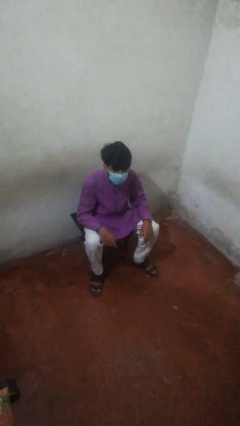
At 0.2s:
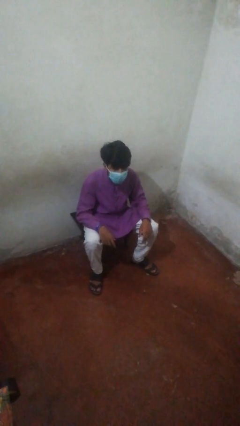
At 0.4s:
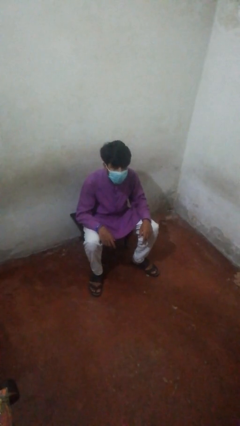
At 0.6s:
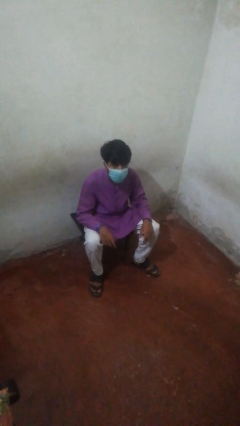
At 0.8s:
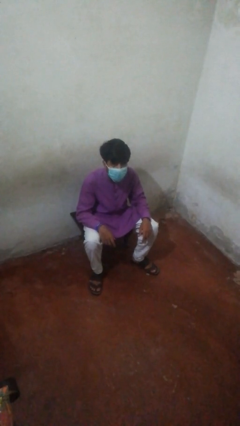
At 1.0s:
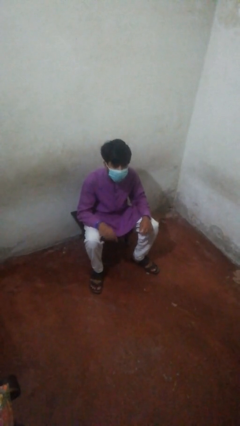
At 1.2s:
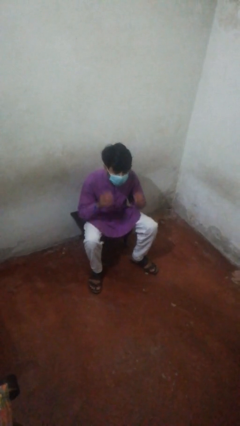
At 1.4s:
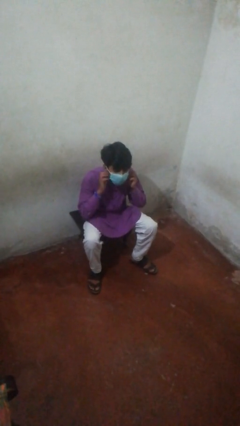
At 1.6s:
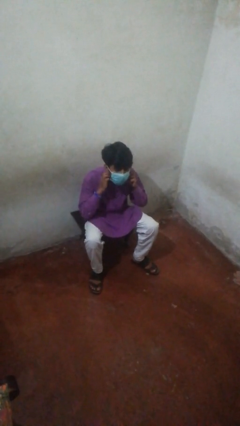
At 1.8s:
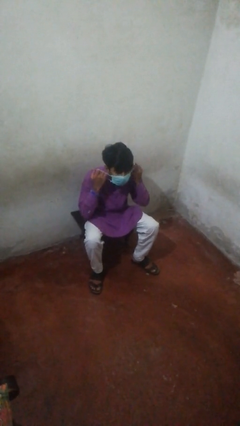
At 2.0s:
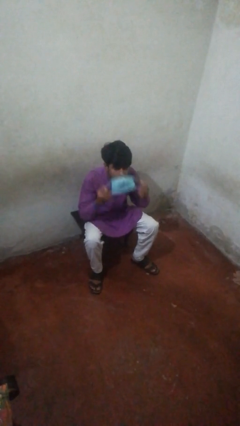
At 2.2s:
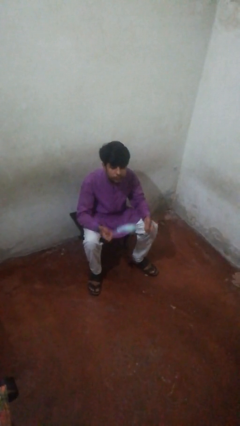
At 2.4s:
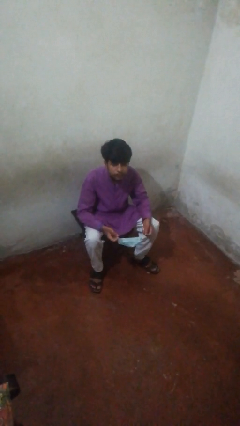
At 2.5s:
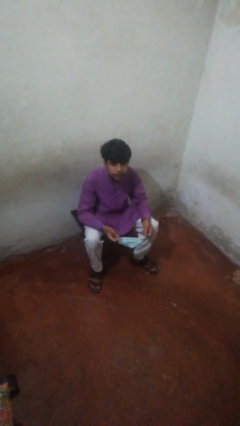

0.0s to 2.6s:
person takes off facemask

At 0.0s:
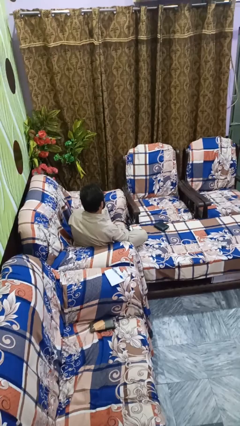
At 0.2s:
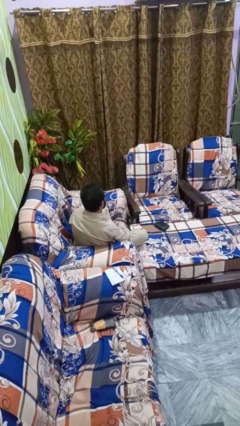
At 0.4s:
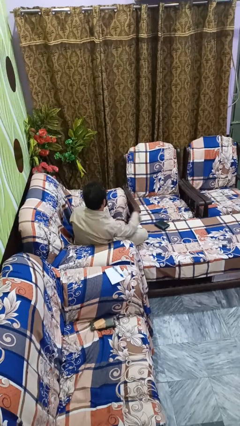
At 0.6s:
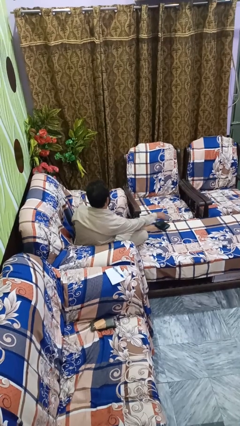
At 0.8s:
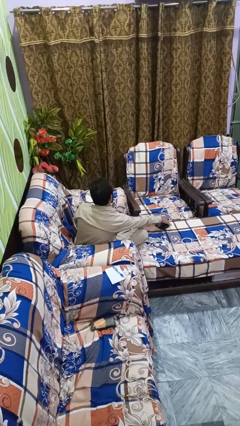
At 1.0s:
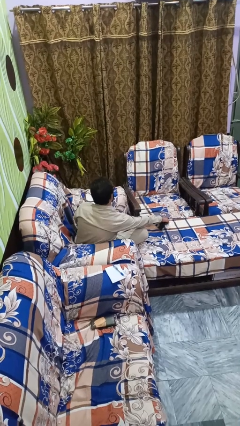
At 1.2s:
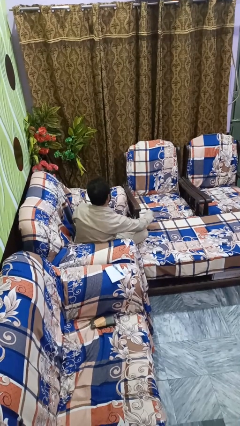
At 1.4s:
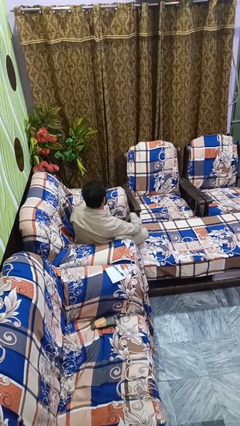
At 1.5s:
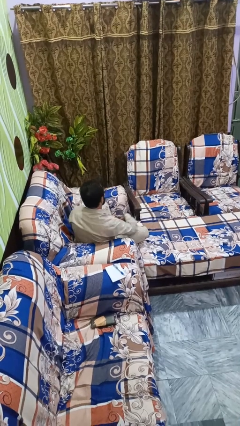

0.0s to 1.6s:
person picks up object from floor

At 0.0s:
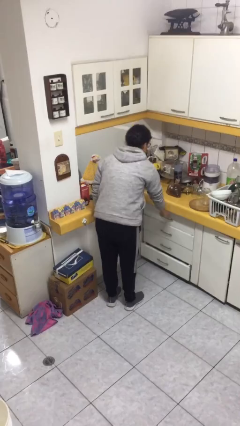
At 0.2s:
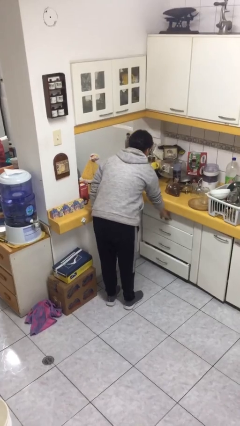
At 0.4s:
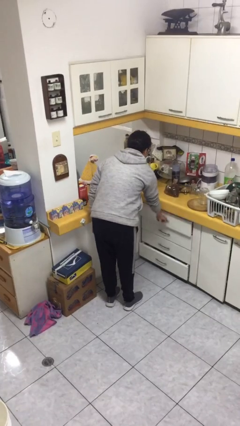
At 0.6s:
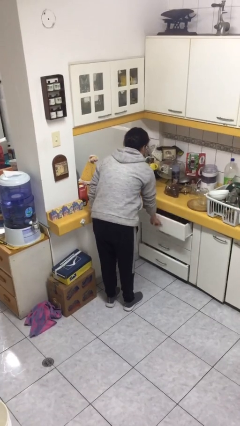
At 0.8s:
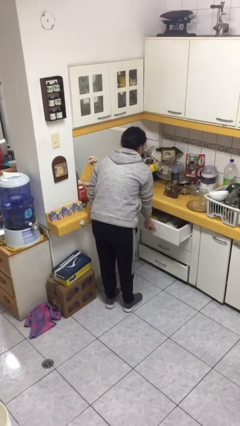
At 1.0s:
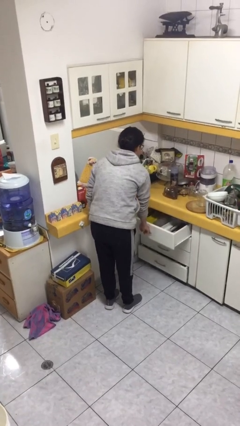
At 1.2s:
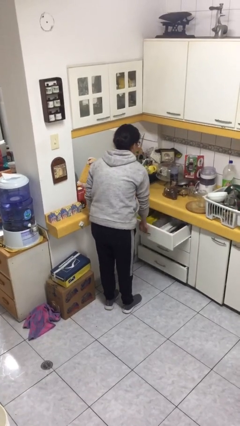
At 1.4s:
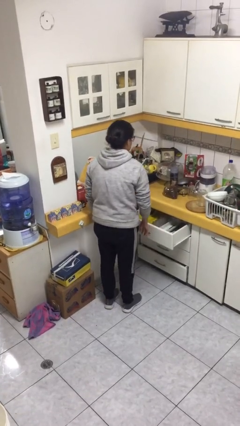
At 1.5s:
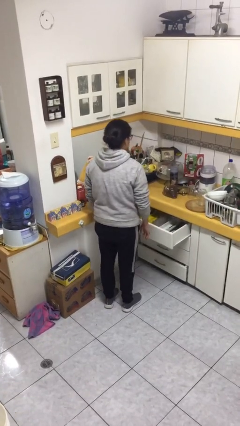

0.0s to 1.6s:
person opens kitchen drawer

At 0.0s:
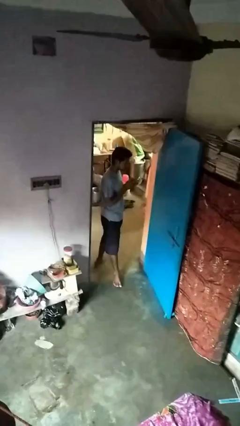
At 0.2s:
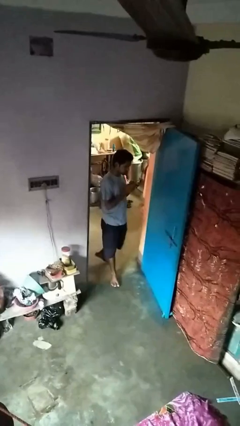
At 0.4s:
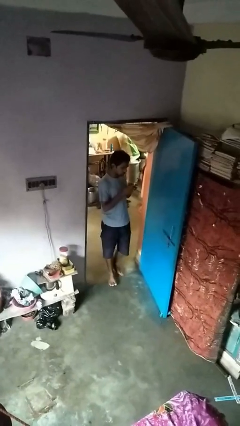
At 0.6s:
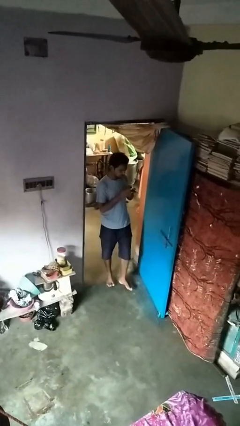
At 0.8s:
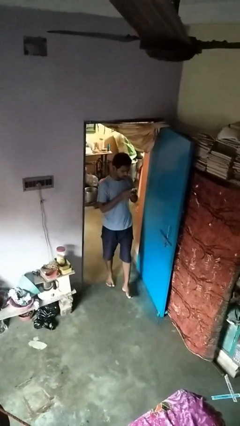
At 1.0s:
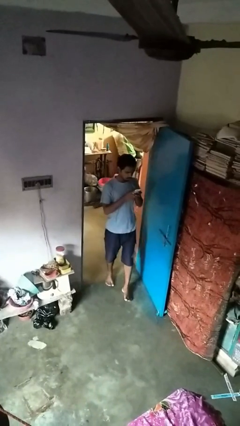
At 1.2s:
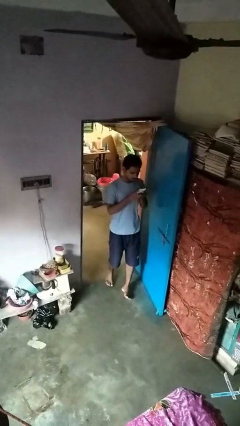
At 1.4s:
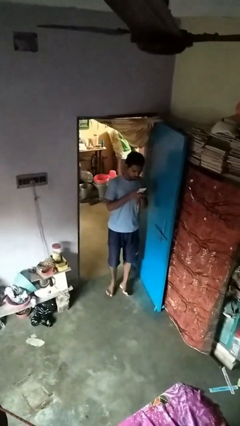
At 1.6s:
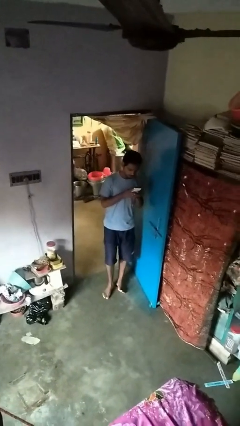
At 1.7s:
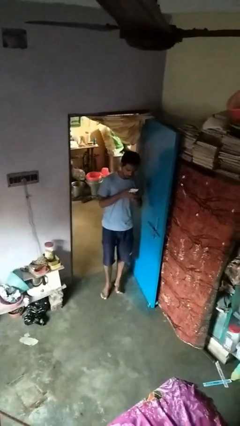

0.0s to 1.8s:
person enters scene through structure

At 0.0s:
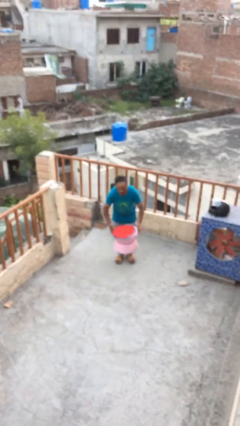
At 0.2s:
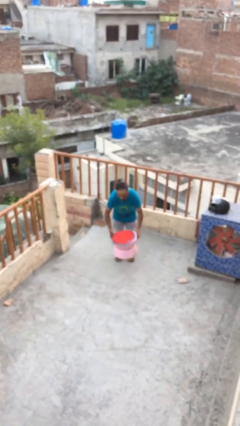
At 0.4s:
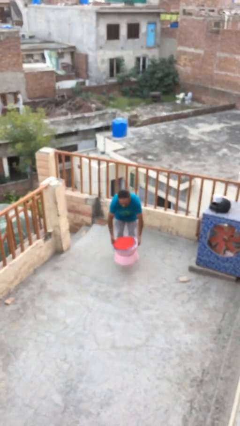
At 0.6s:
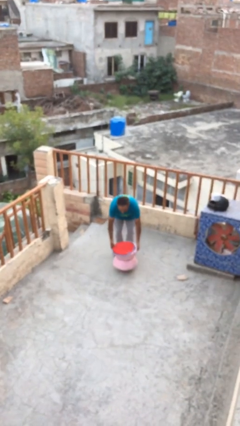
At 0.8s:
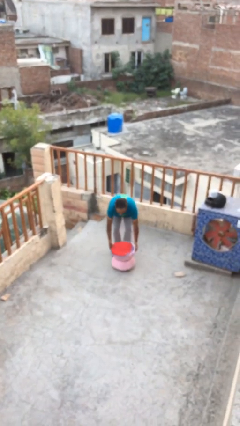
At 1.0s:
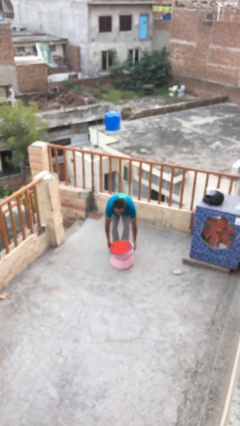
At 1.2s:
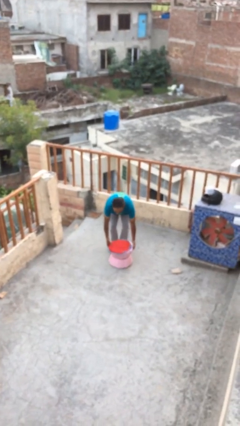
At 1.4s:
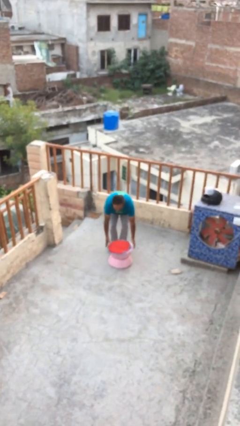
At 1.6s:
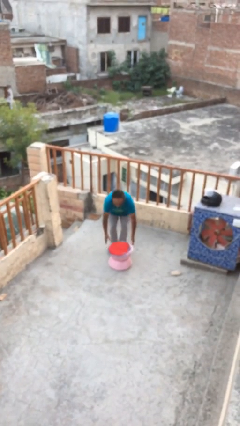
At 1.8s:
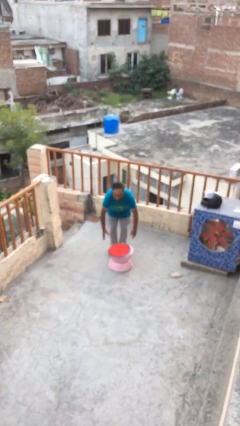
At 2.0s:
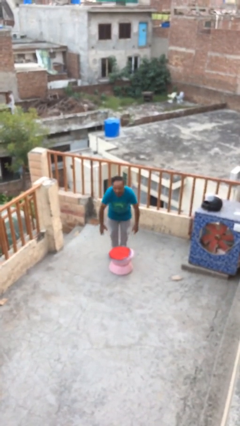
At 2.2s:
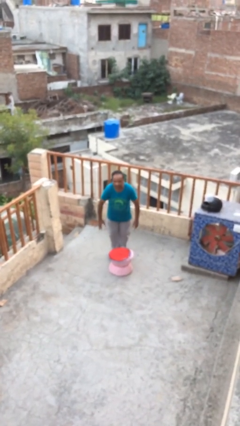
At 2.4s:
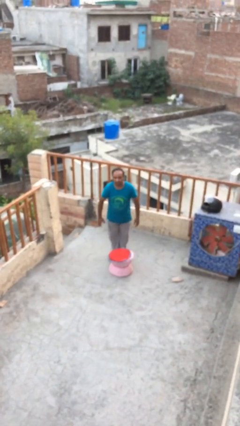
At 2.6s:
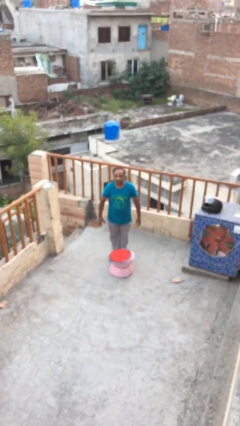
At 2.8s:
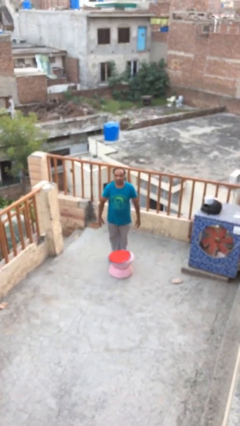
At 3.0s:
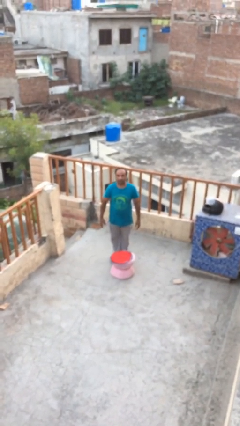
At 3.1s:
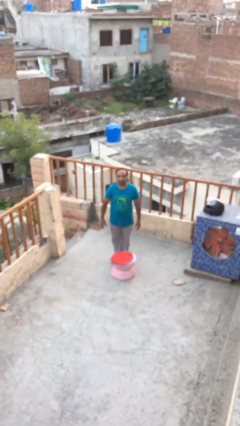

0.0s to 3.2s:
person puts down object on floor

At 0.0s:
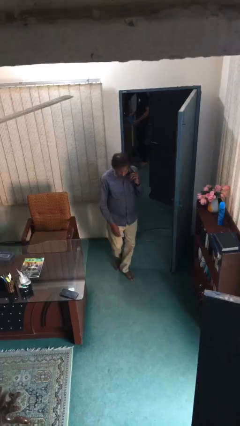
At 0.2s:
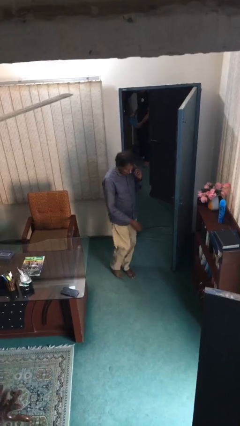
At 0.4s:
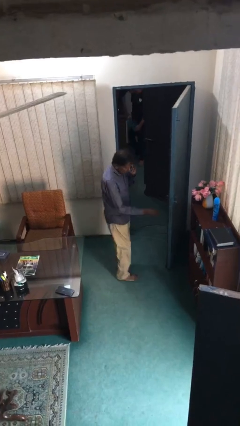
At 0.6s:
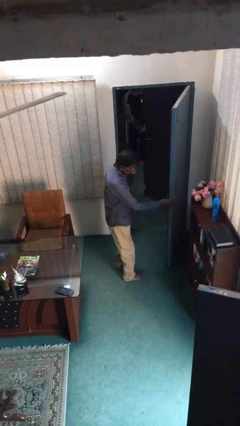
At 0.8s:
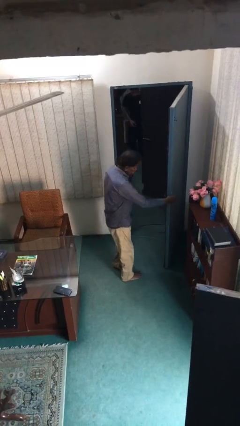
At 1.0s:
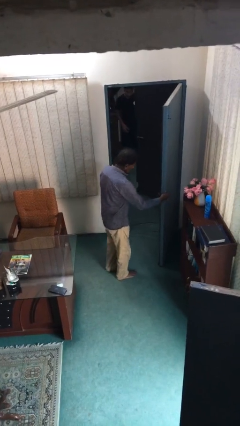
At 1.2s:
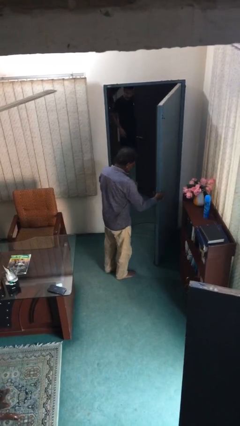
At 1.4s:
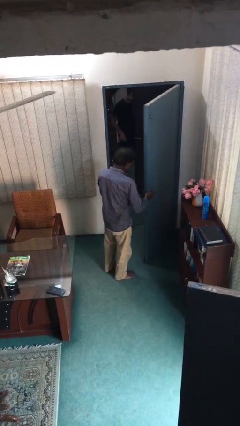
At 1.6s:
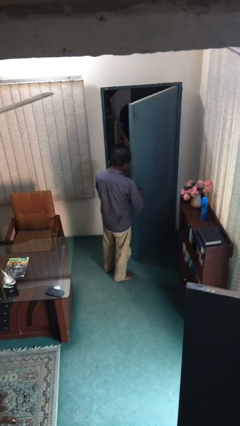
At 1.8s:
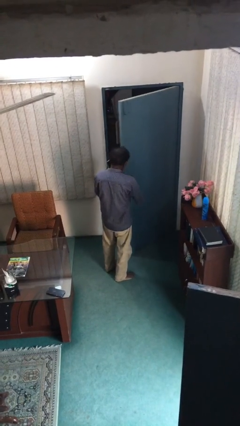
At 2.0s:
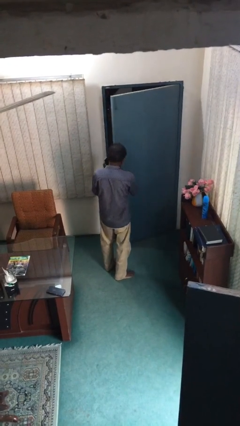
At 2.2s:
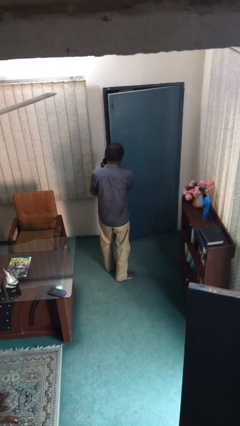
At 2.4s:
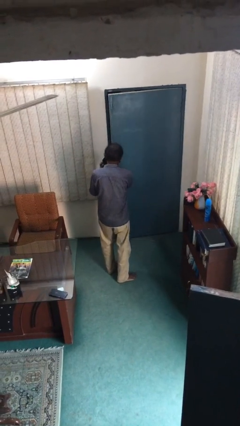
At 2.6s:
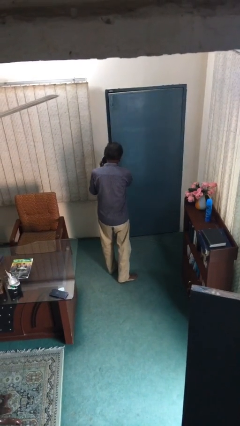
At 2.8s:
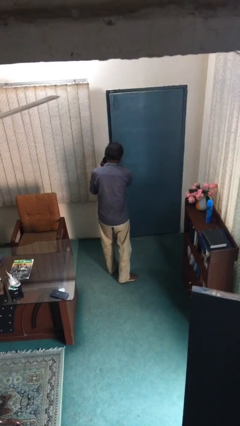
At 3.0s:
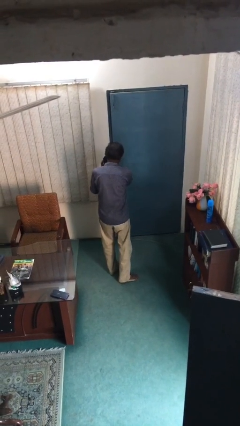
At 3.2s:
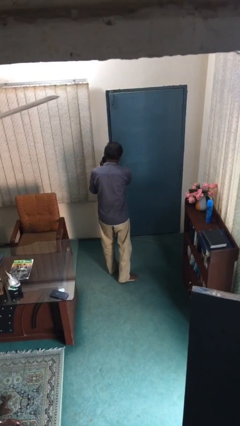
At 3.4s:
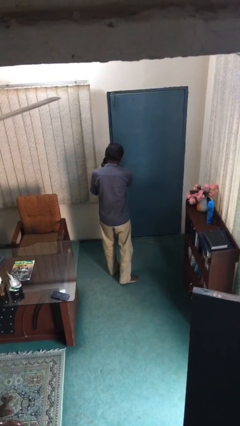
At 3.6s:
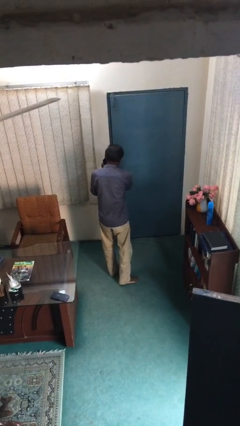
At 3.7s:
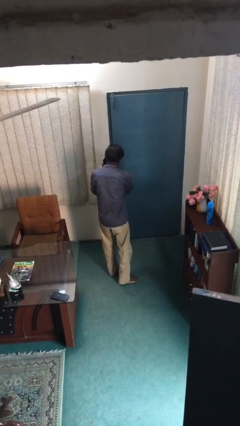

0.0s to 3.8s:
person closes facility door

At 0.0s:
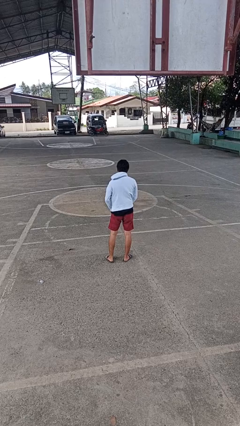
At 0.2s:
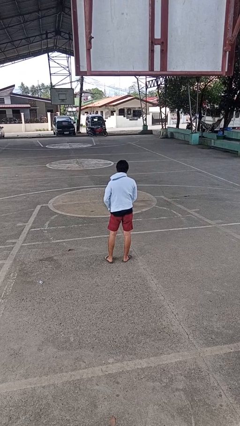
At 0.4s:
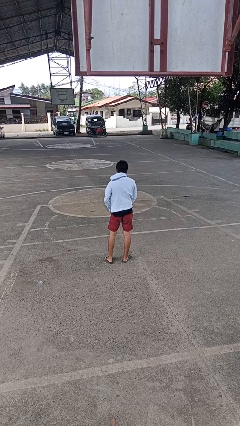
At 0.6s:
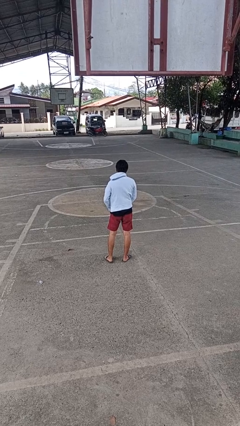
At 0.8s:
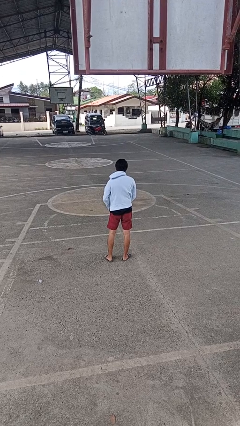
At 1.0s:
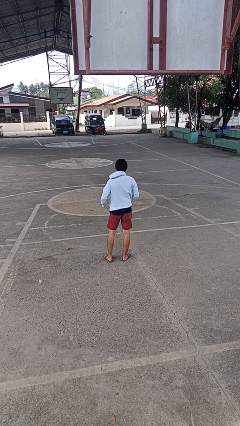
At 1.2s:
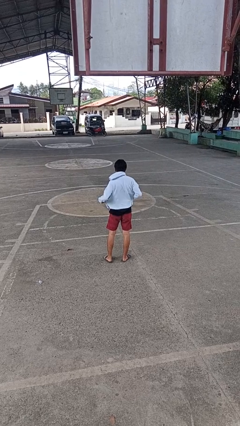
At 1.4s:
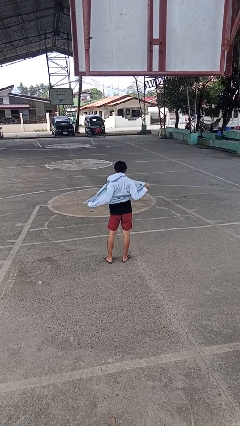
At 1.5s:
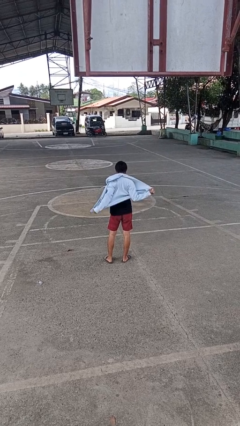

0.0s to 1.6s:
person unzips jacket

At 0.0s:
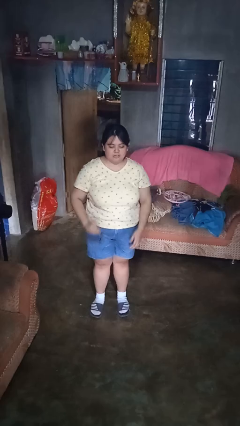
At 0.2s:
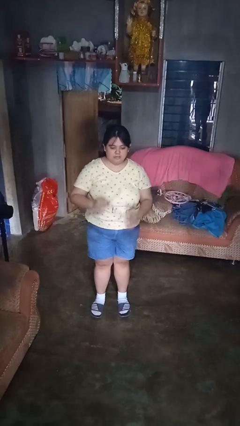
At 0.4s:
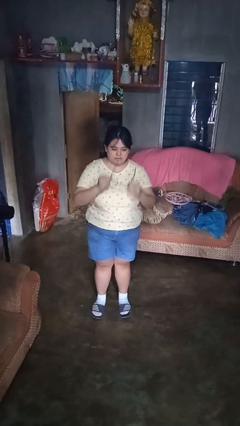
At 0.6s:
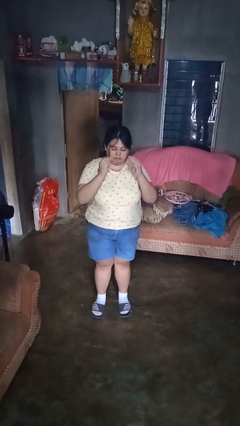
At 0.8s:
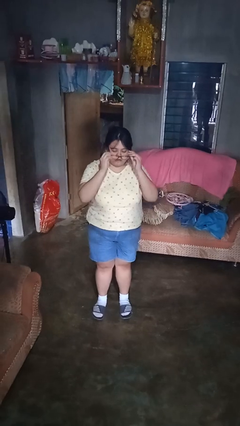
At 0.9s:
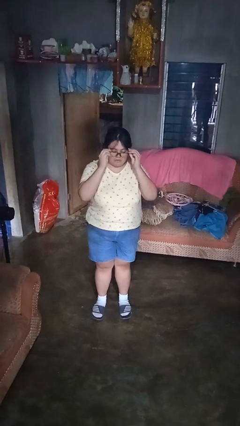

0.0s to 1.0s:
person puts on glasses
